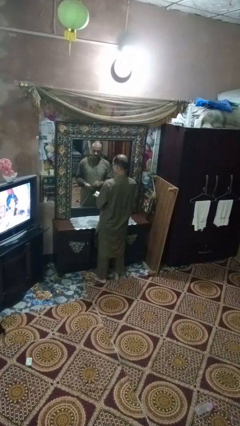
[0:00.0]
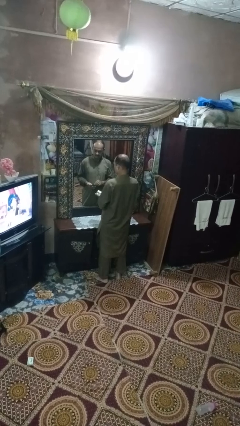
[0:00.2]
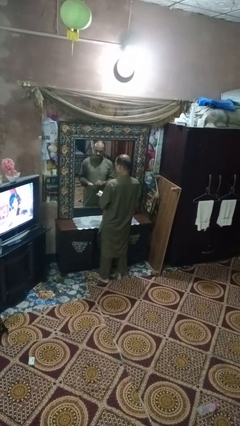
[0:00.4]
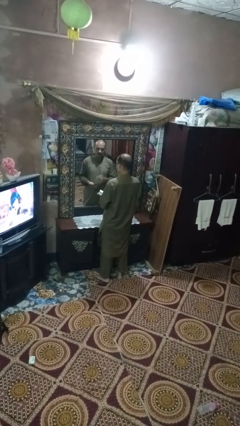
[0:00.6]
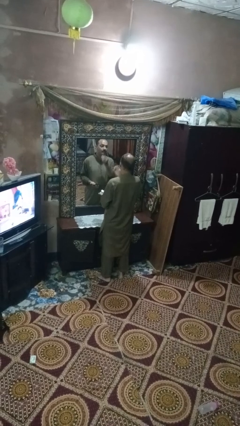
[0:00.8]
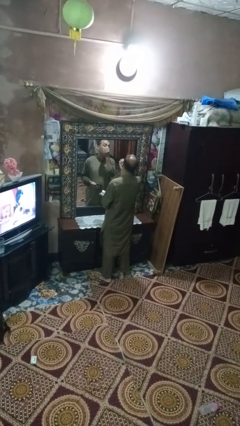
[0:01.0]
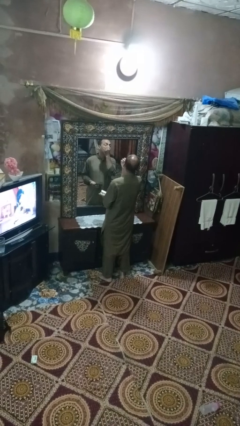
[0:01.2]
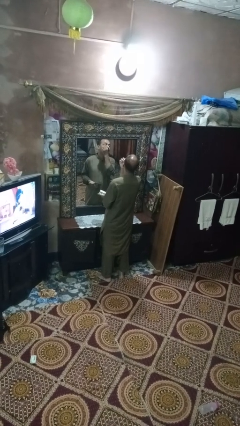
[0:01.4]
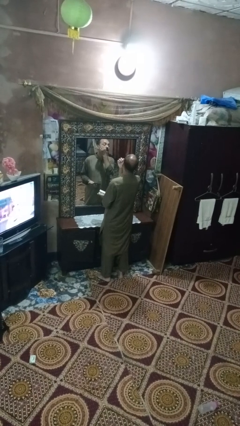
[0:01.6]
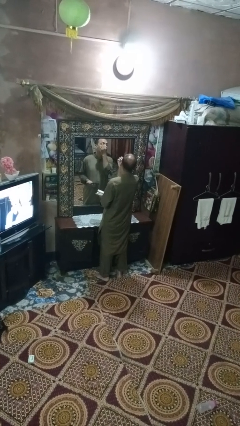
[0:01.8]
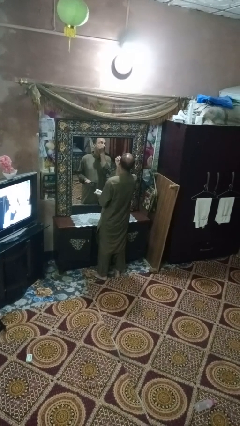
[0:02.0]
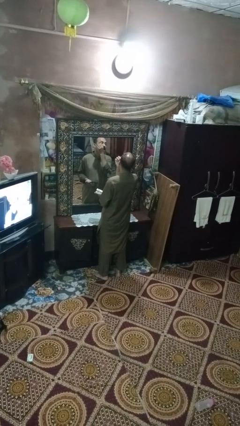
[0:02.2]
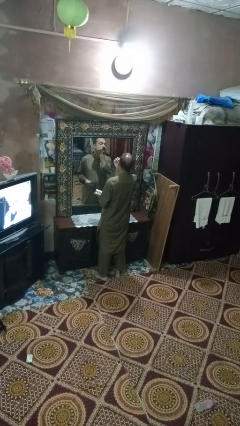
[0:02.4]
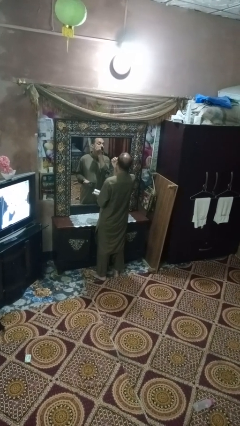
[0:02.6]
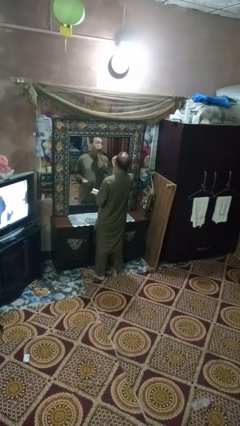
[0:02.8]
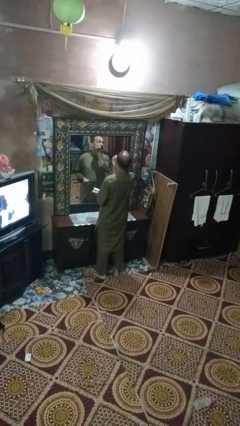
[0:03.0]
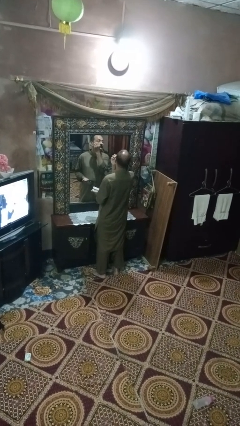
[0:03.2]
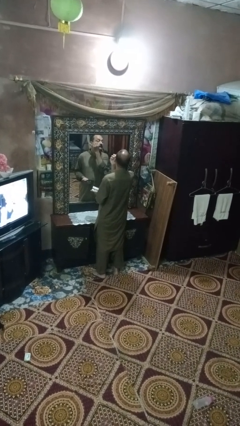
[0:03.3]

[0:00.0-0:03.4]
person applies eye makeup

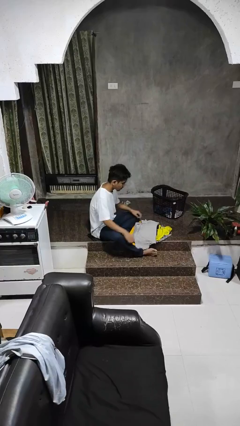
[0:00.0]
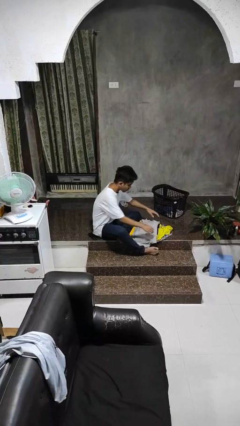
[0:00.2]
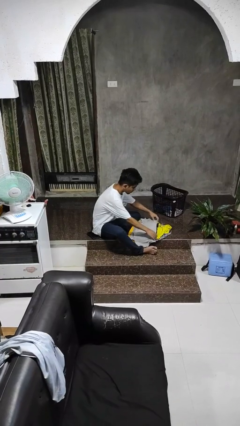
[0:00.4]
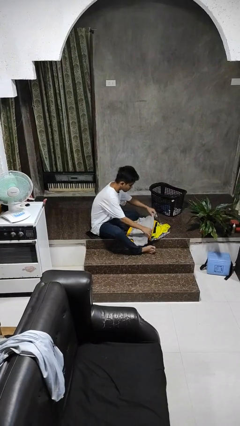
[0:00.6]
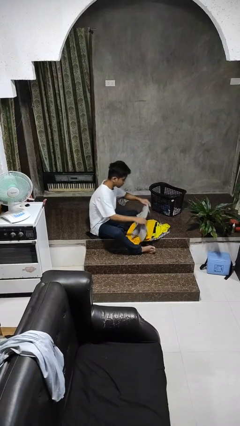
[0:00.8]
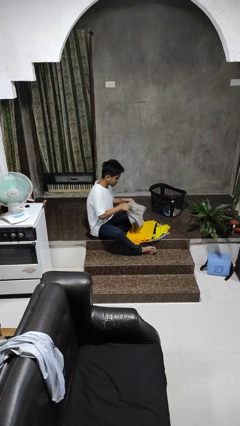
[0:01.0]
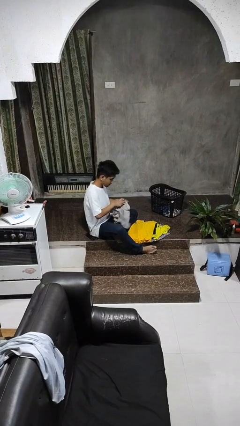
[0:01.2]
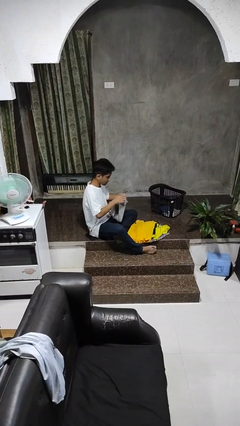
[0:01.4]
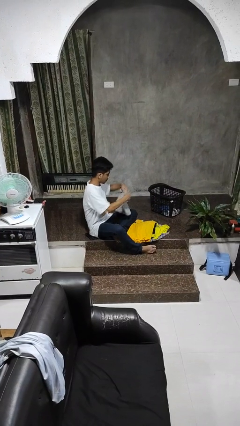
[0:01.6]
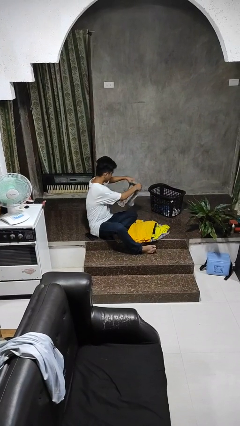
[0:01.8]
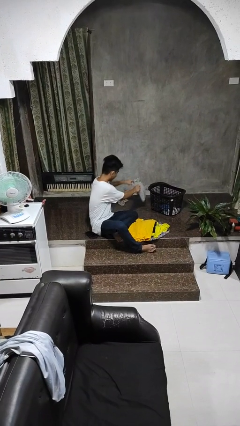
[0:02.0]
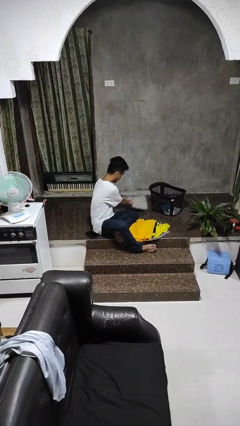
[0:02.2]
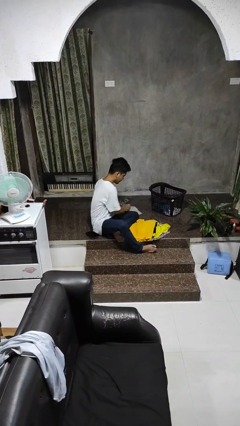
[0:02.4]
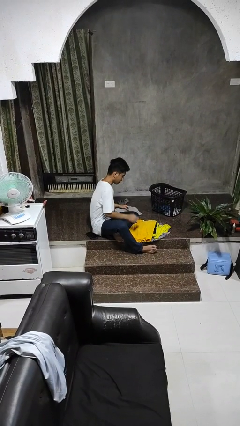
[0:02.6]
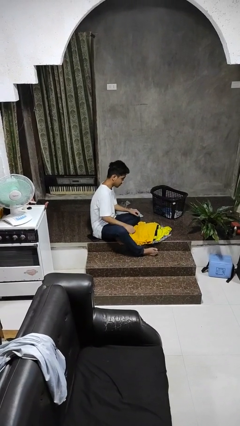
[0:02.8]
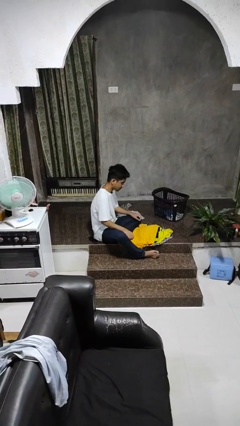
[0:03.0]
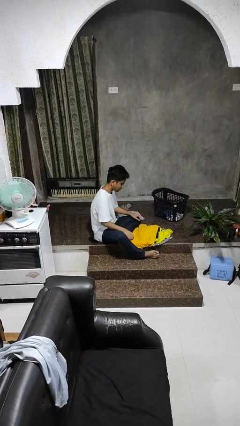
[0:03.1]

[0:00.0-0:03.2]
person folds shirt

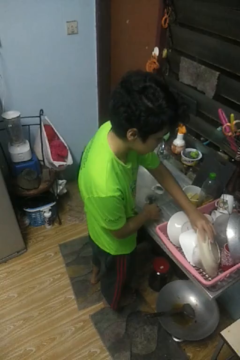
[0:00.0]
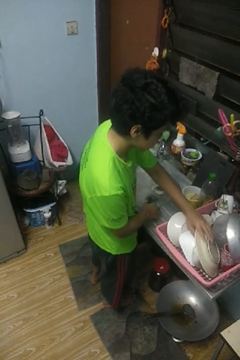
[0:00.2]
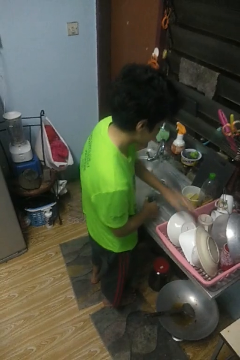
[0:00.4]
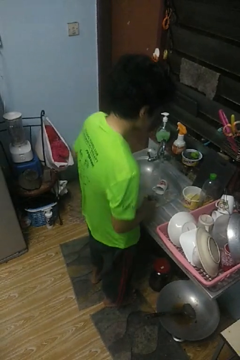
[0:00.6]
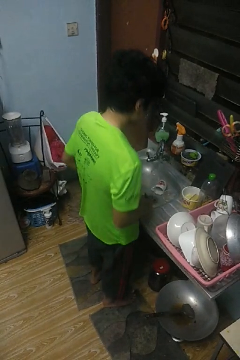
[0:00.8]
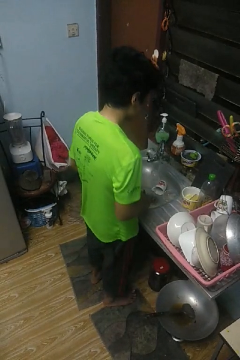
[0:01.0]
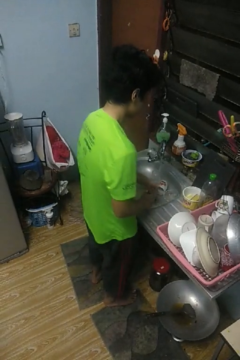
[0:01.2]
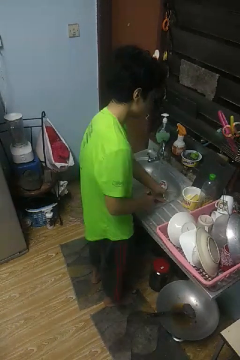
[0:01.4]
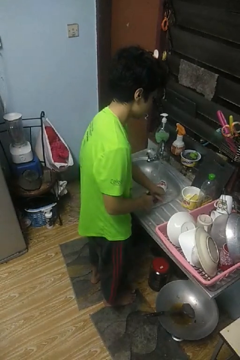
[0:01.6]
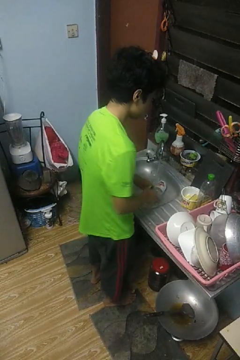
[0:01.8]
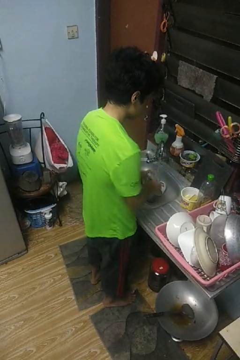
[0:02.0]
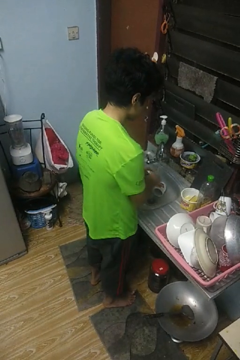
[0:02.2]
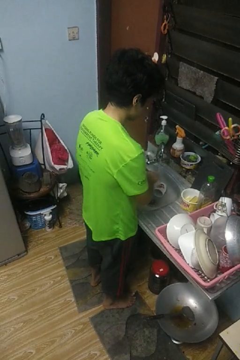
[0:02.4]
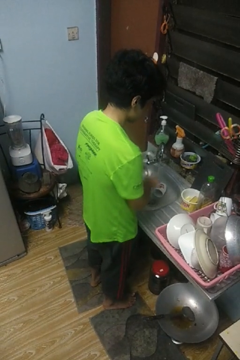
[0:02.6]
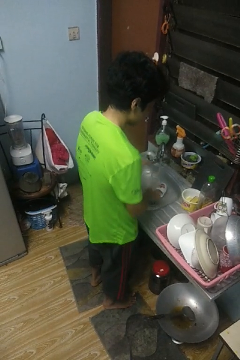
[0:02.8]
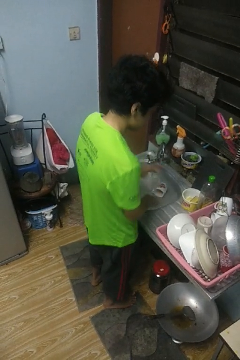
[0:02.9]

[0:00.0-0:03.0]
person washes dish

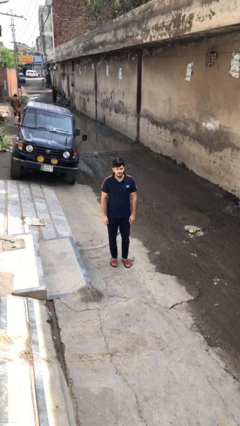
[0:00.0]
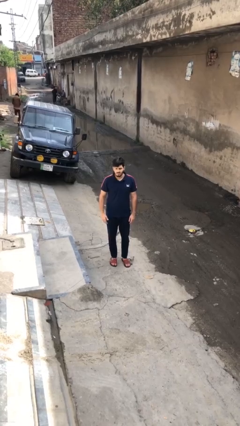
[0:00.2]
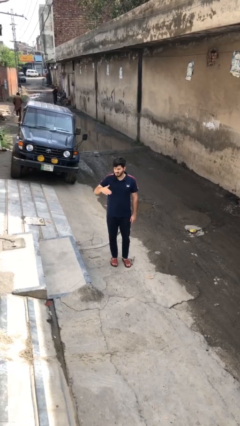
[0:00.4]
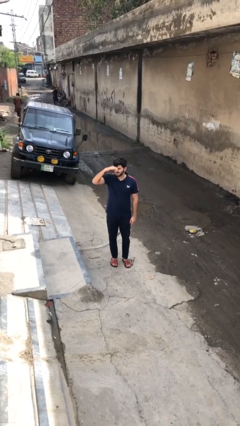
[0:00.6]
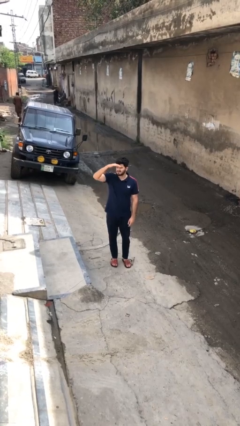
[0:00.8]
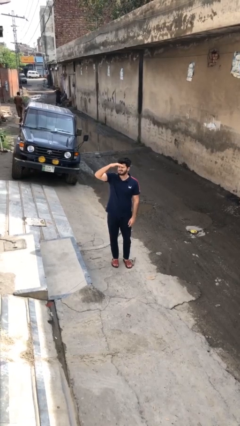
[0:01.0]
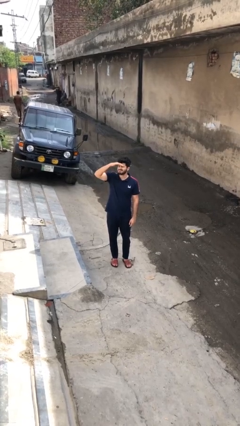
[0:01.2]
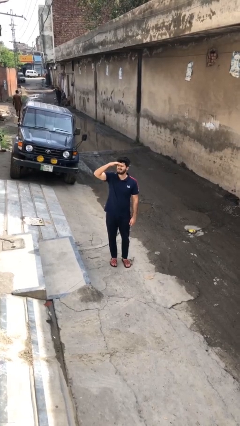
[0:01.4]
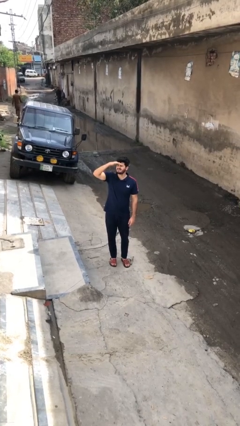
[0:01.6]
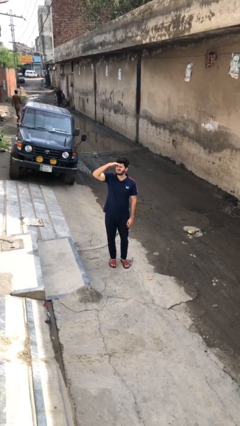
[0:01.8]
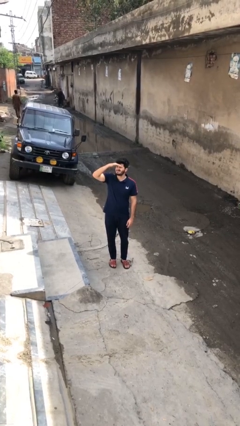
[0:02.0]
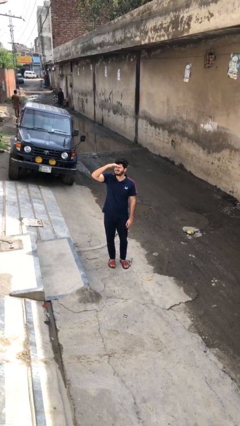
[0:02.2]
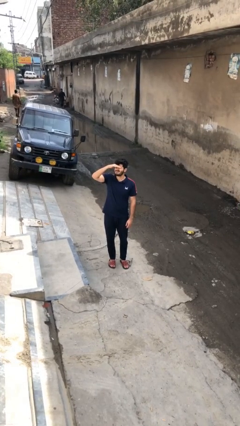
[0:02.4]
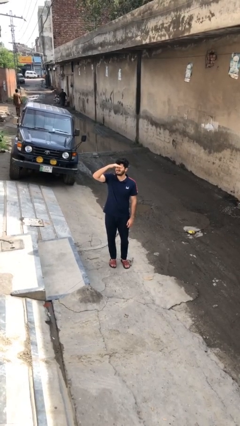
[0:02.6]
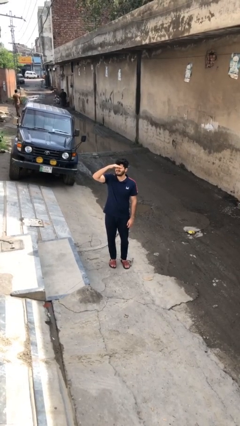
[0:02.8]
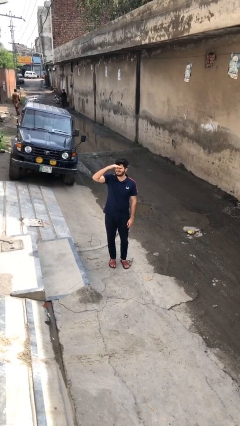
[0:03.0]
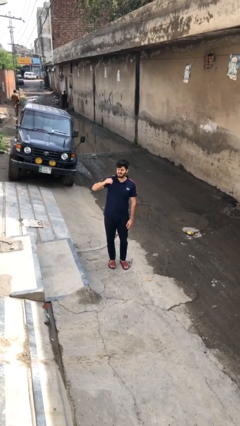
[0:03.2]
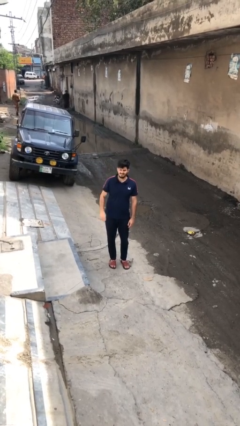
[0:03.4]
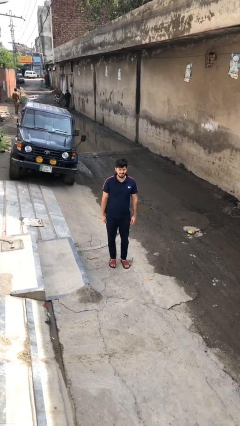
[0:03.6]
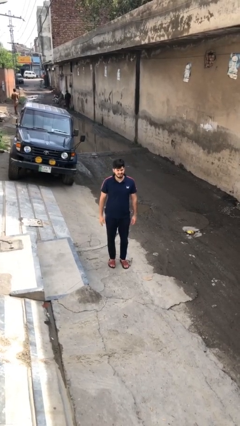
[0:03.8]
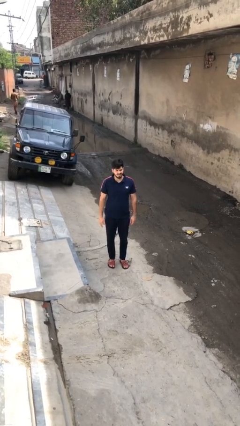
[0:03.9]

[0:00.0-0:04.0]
person shades eyes

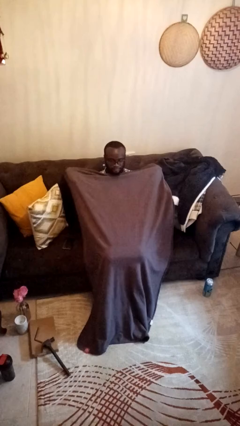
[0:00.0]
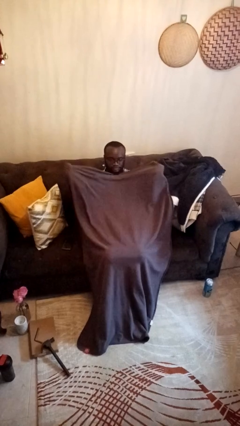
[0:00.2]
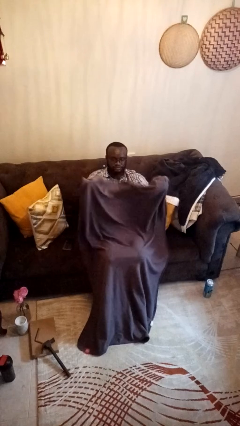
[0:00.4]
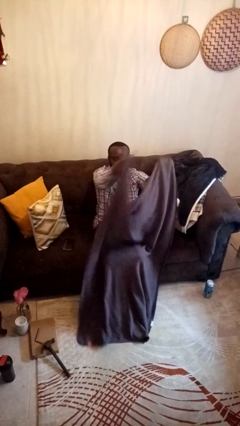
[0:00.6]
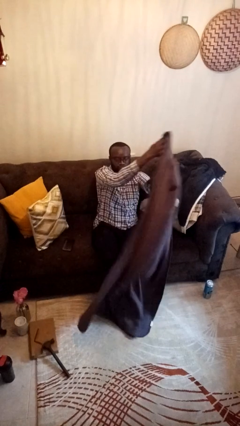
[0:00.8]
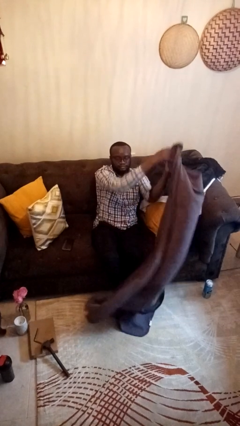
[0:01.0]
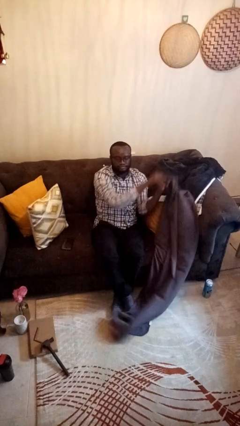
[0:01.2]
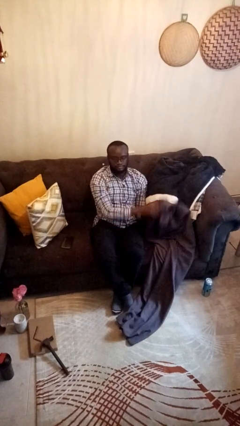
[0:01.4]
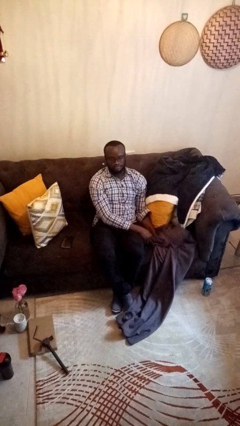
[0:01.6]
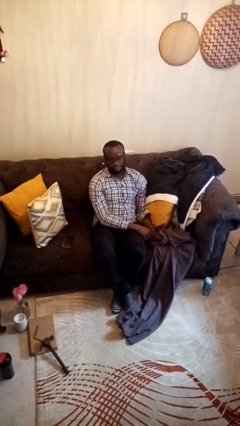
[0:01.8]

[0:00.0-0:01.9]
person uncovers with blanket

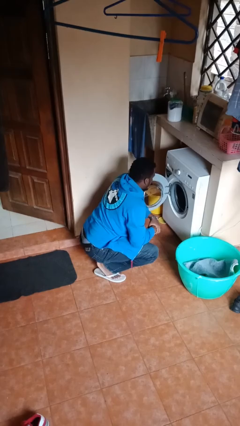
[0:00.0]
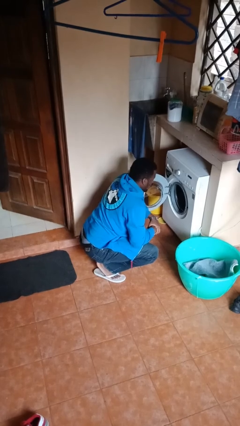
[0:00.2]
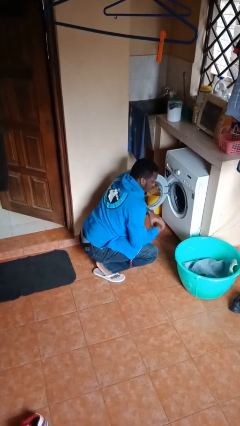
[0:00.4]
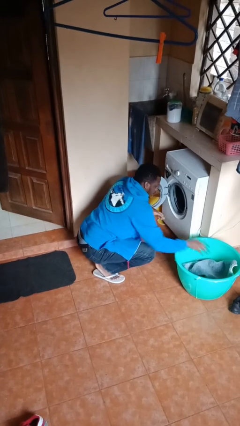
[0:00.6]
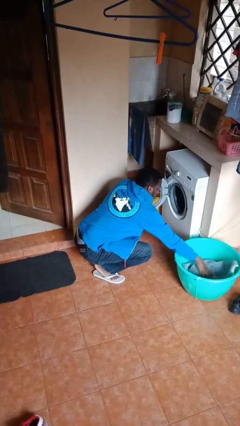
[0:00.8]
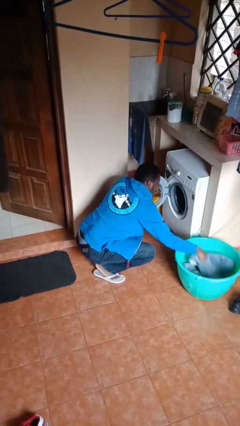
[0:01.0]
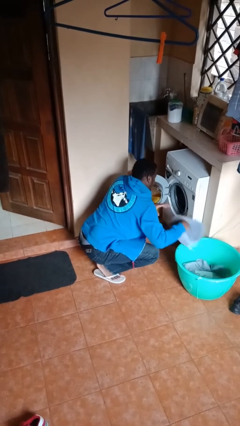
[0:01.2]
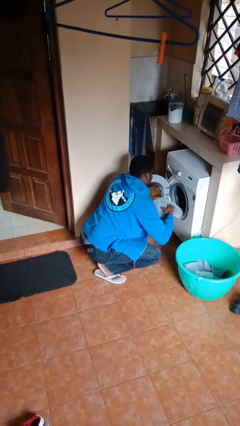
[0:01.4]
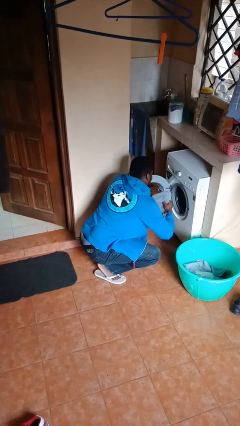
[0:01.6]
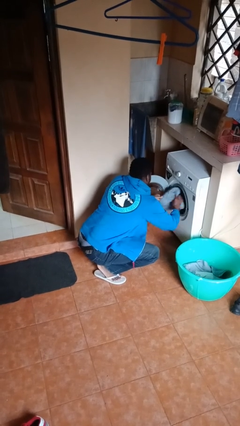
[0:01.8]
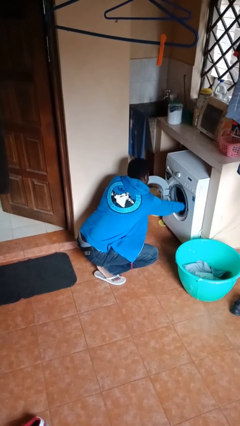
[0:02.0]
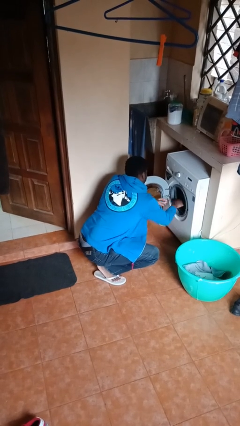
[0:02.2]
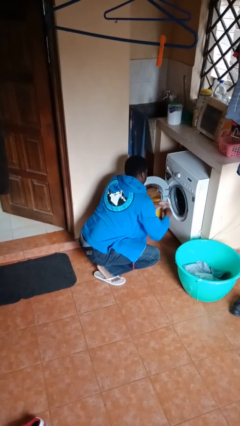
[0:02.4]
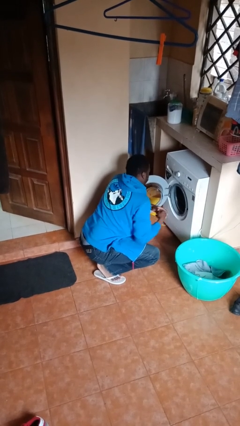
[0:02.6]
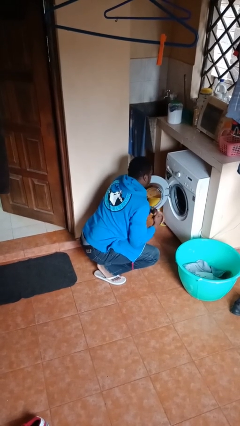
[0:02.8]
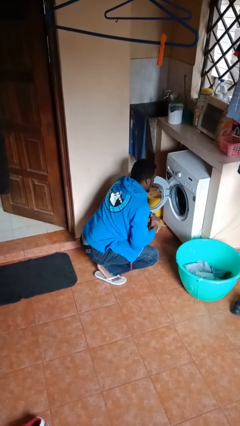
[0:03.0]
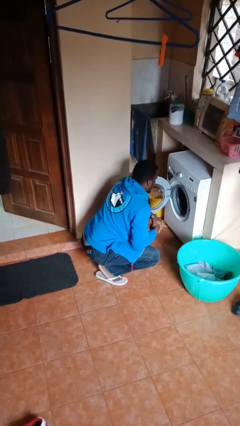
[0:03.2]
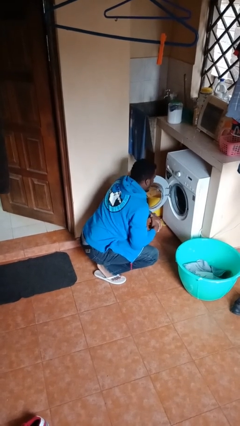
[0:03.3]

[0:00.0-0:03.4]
person loads clotheswasher
